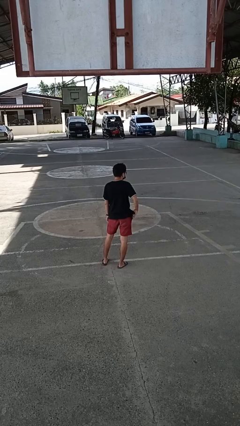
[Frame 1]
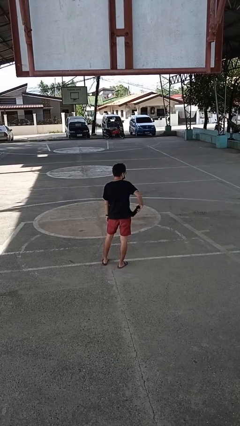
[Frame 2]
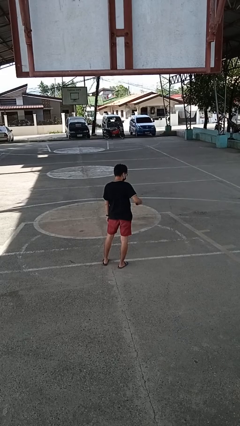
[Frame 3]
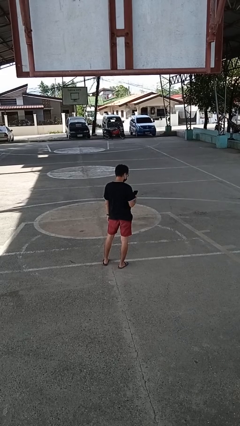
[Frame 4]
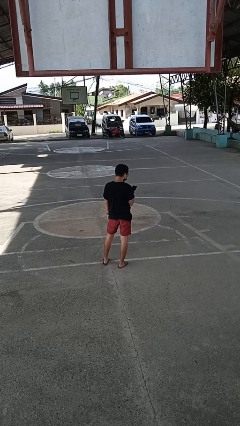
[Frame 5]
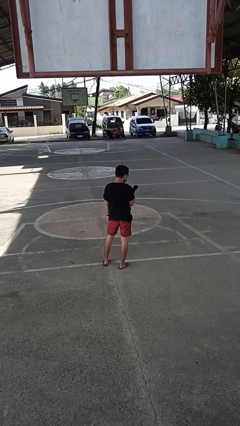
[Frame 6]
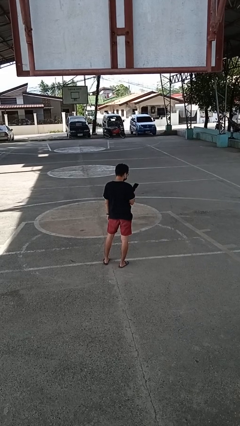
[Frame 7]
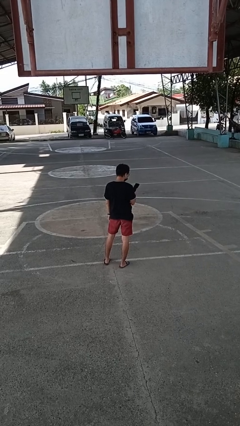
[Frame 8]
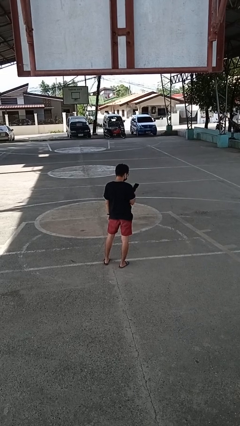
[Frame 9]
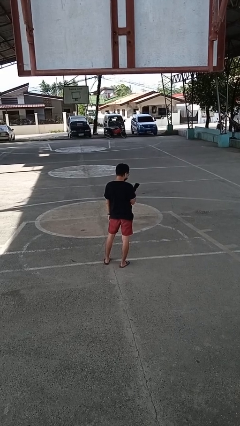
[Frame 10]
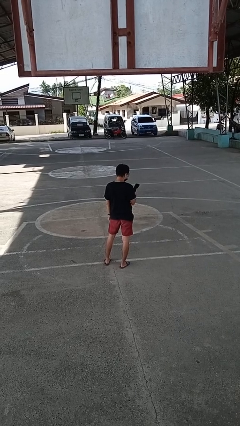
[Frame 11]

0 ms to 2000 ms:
person takes phone from pocket

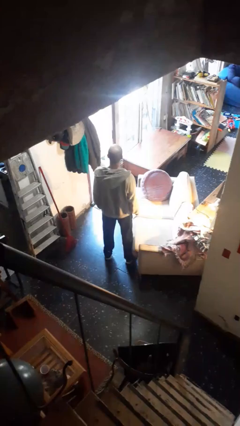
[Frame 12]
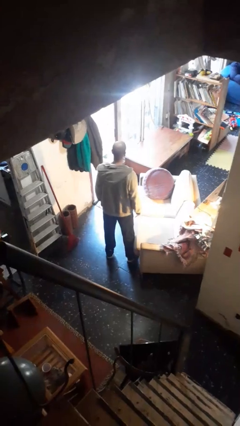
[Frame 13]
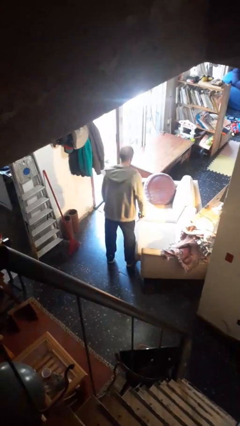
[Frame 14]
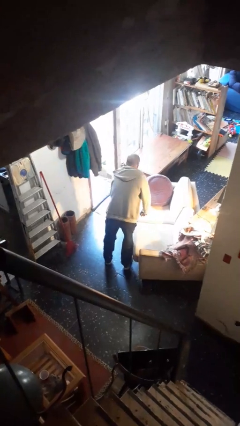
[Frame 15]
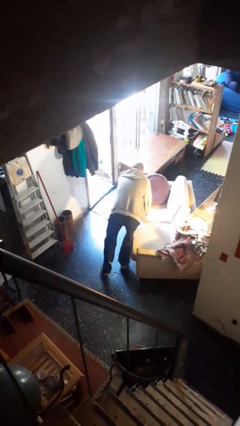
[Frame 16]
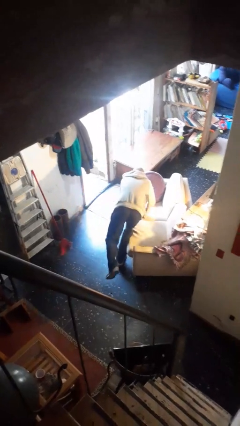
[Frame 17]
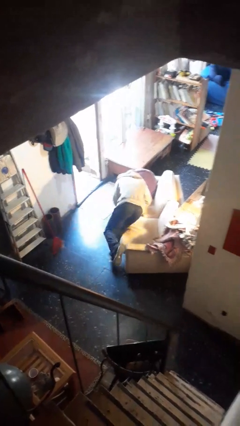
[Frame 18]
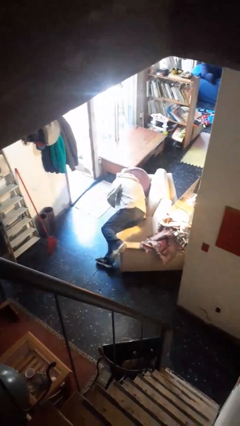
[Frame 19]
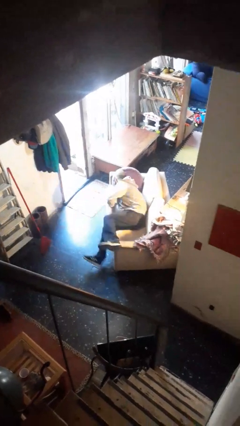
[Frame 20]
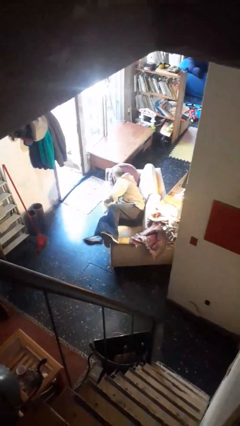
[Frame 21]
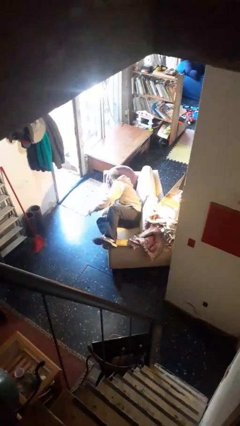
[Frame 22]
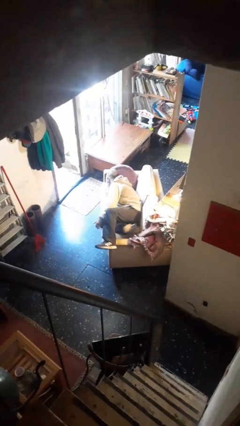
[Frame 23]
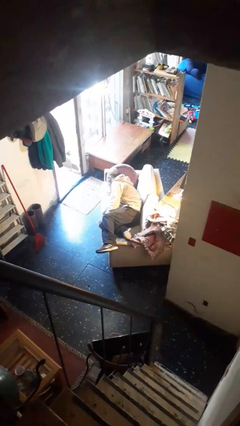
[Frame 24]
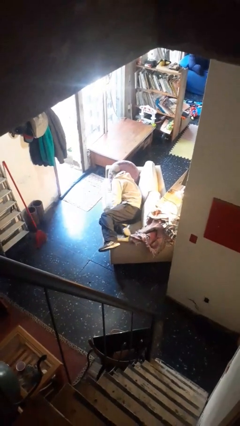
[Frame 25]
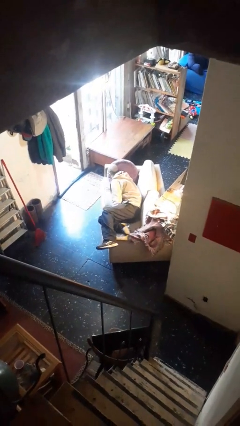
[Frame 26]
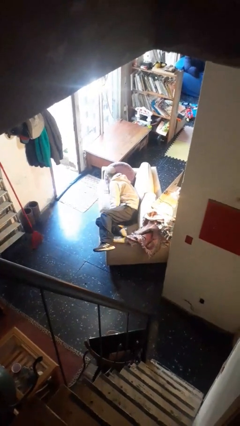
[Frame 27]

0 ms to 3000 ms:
person lies down on couch

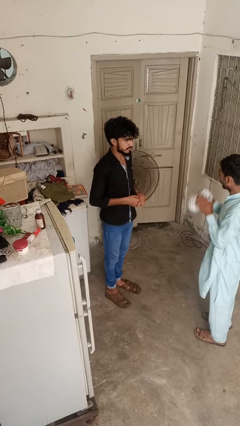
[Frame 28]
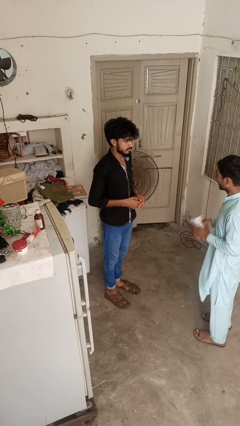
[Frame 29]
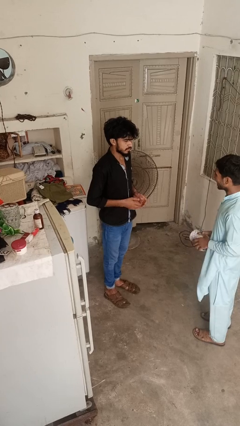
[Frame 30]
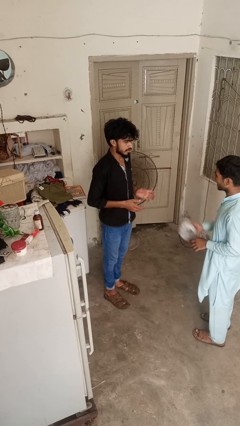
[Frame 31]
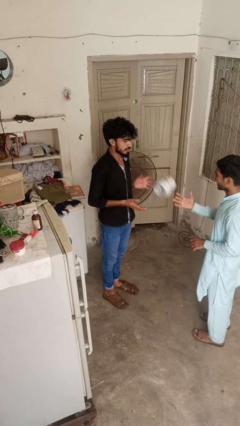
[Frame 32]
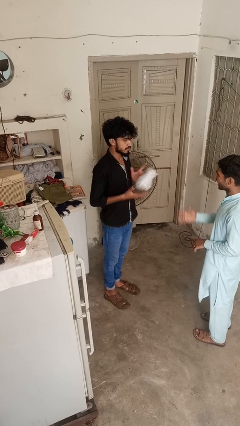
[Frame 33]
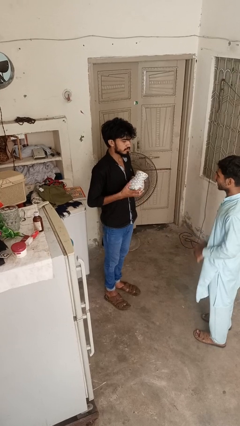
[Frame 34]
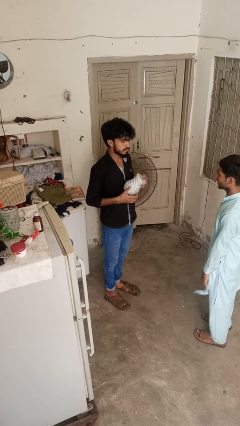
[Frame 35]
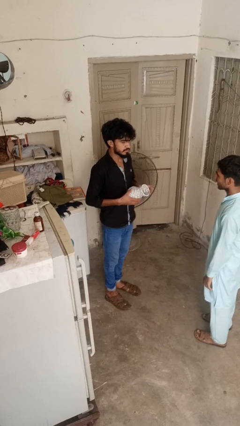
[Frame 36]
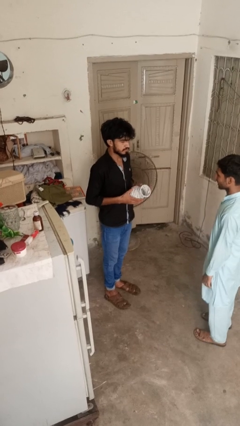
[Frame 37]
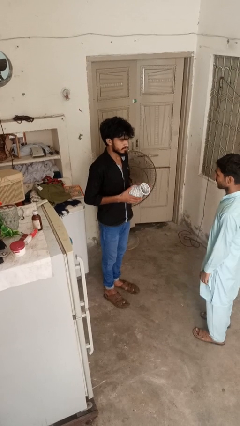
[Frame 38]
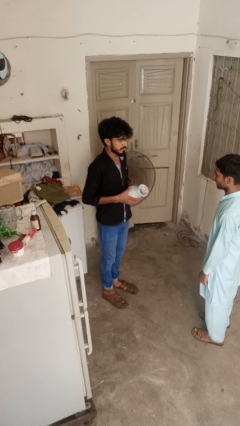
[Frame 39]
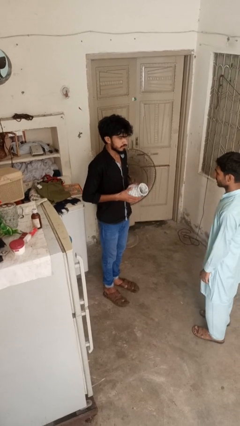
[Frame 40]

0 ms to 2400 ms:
person catches object from person

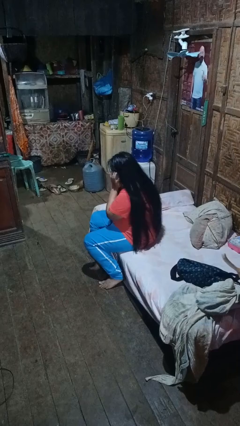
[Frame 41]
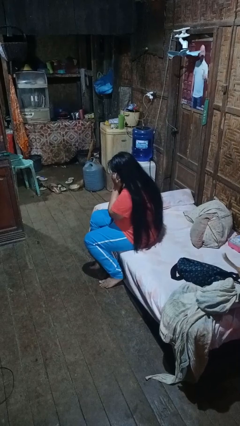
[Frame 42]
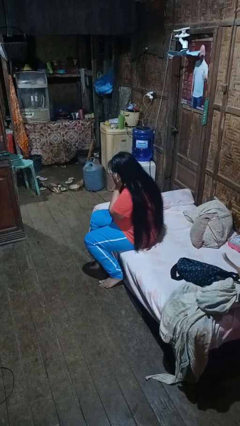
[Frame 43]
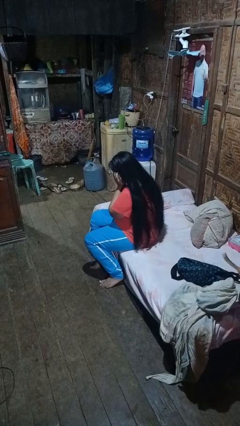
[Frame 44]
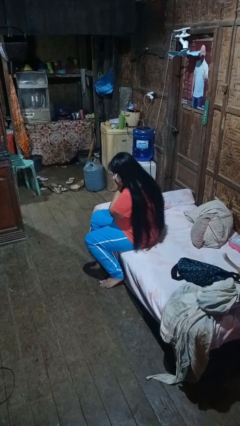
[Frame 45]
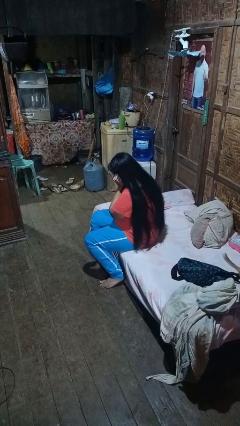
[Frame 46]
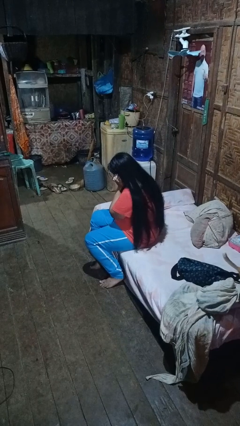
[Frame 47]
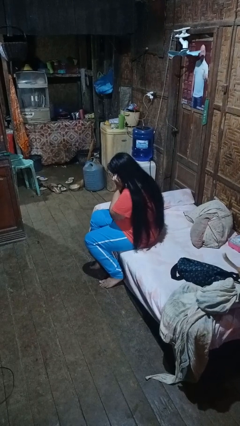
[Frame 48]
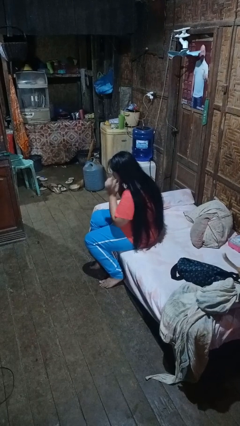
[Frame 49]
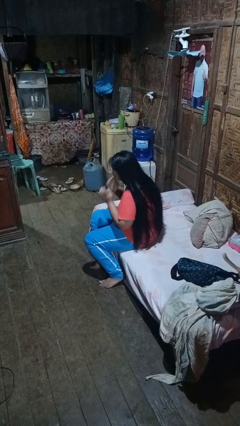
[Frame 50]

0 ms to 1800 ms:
person puts fingers in ear

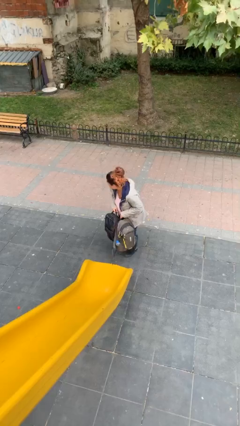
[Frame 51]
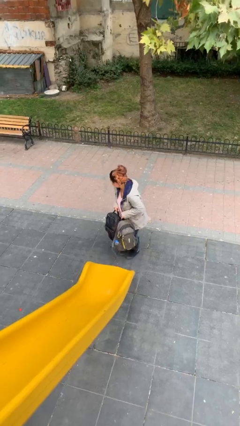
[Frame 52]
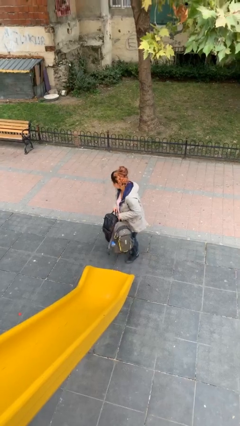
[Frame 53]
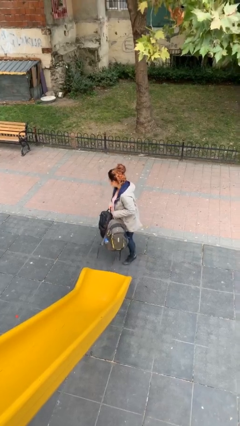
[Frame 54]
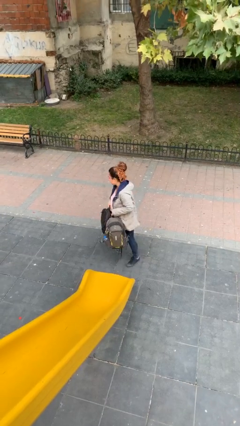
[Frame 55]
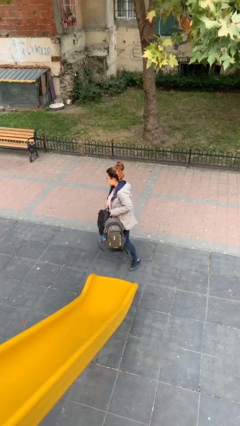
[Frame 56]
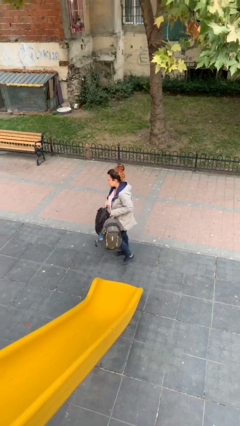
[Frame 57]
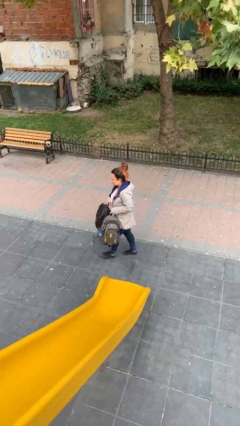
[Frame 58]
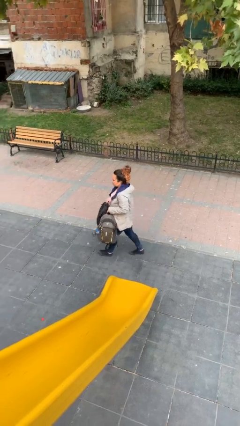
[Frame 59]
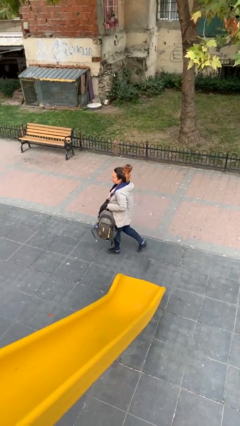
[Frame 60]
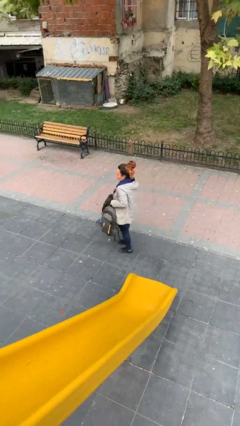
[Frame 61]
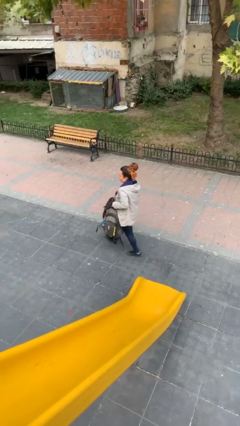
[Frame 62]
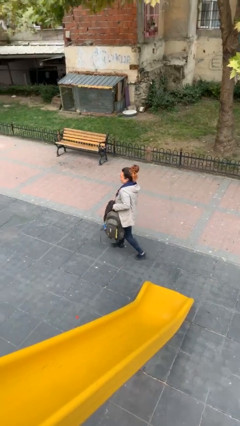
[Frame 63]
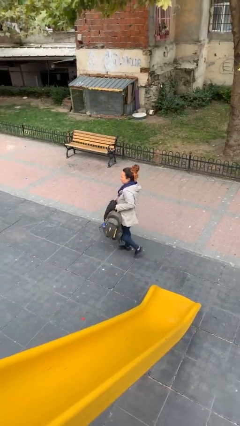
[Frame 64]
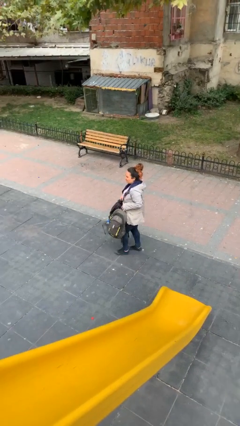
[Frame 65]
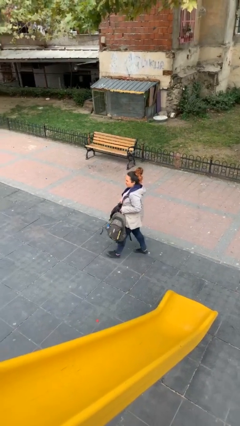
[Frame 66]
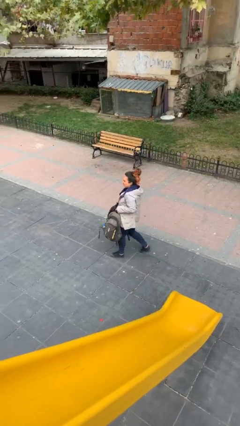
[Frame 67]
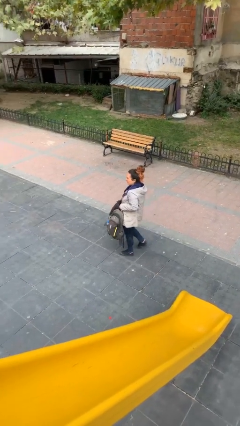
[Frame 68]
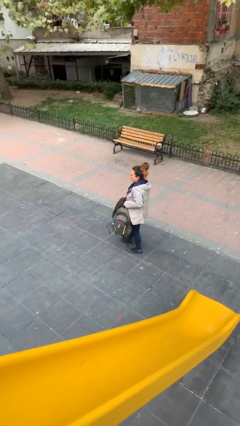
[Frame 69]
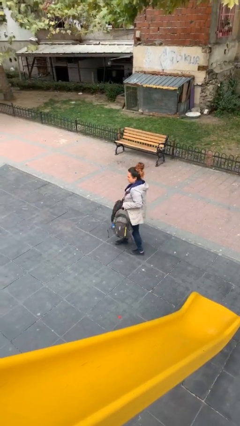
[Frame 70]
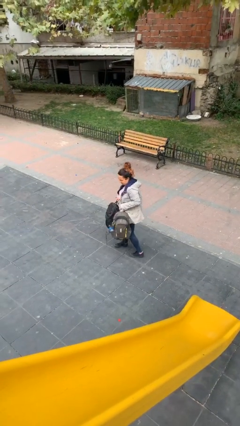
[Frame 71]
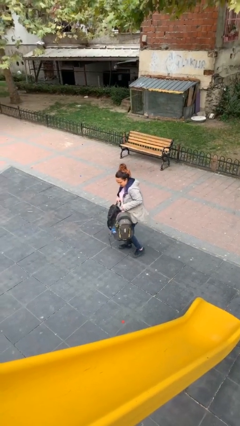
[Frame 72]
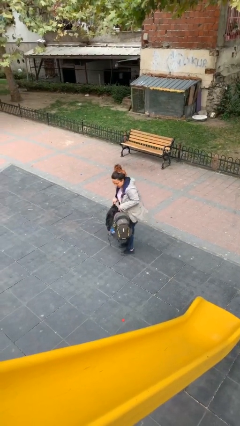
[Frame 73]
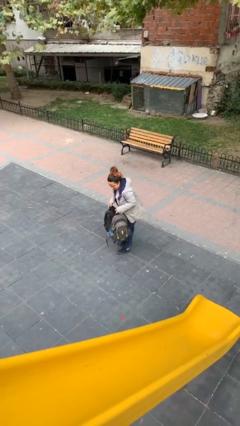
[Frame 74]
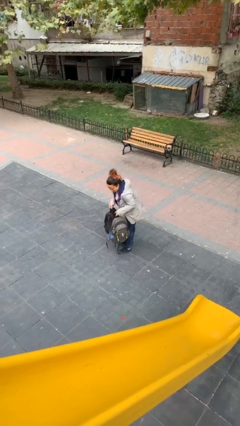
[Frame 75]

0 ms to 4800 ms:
person carries heavy object

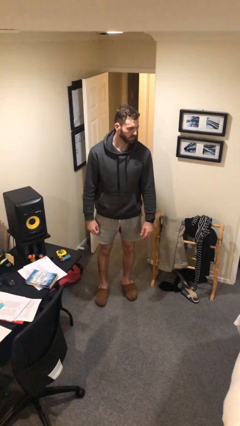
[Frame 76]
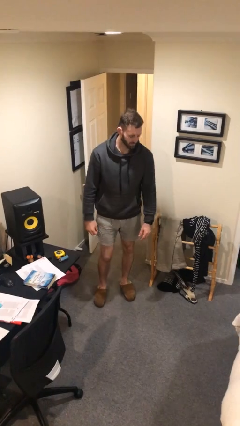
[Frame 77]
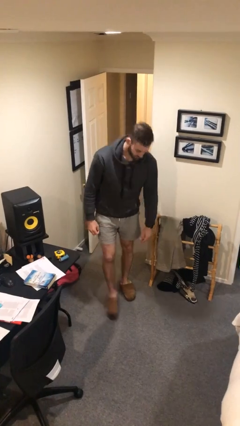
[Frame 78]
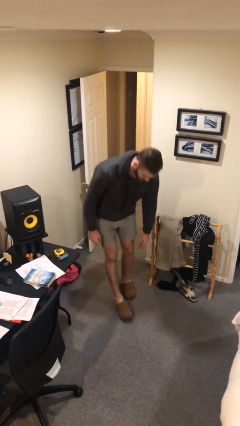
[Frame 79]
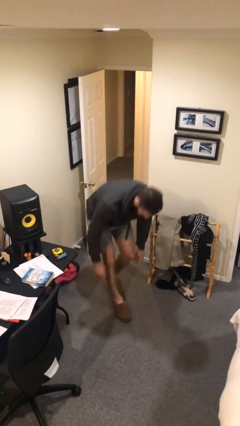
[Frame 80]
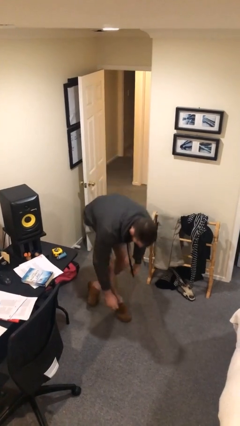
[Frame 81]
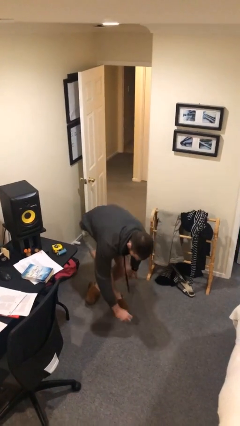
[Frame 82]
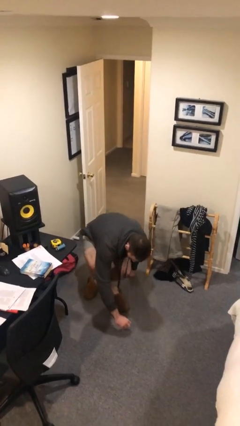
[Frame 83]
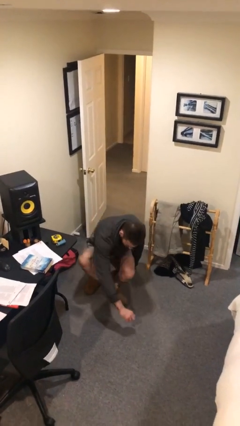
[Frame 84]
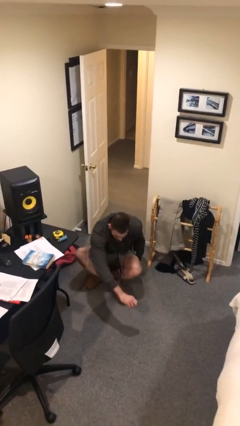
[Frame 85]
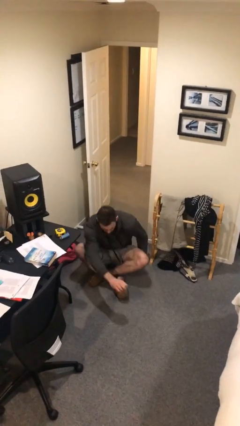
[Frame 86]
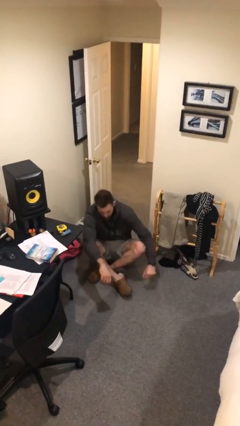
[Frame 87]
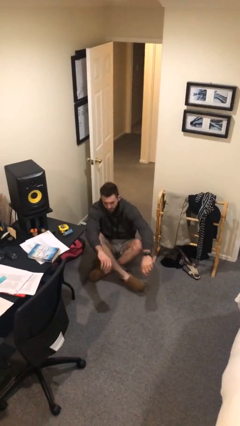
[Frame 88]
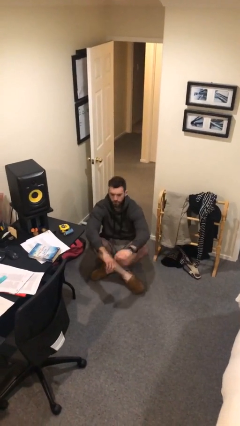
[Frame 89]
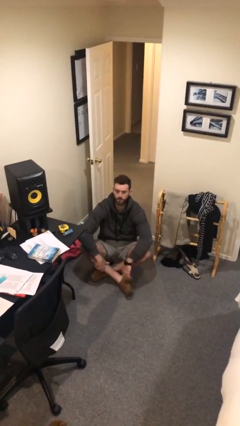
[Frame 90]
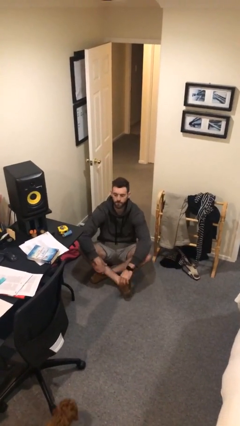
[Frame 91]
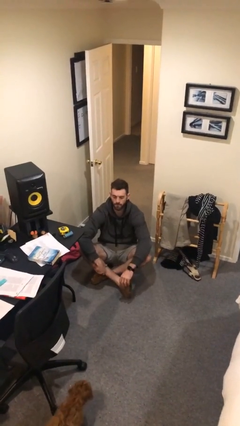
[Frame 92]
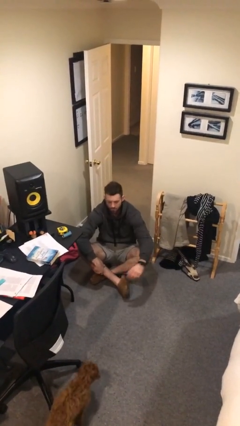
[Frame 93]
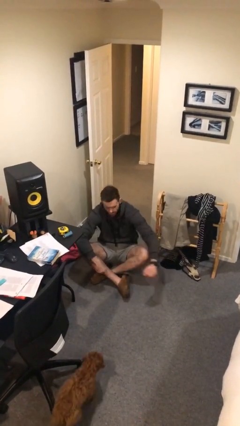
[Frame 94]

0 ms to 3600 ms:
person sits crisscross
